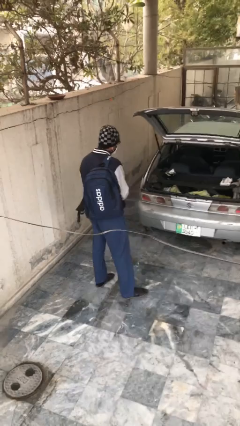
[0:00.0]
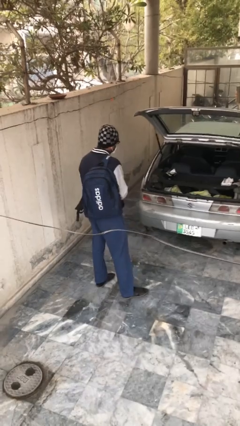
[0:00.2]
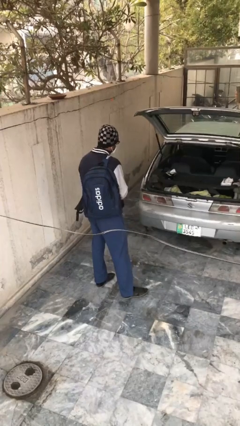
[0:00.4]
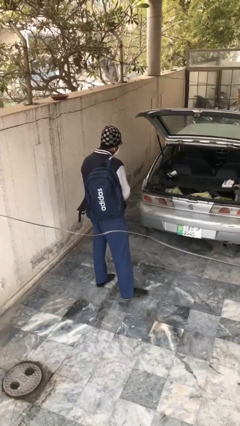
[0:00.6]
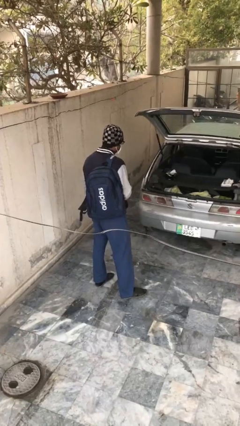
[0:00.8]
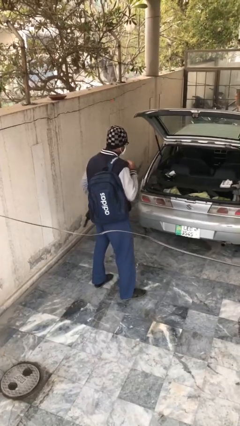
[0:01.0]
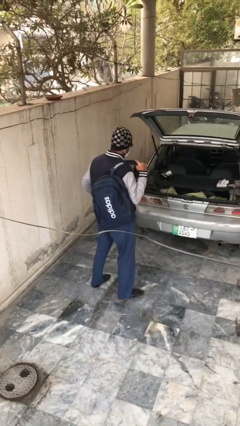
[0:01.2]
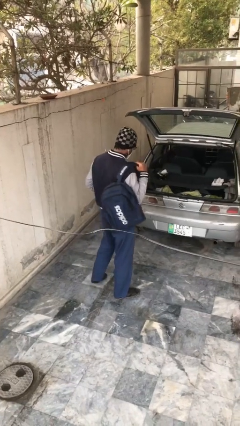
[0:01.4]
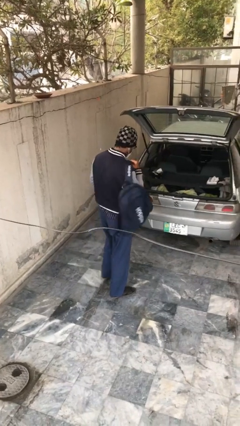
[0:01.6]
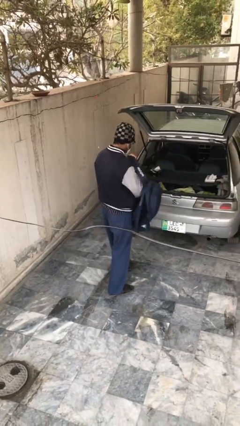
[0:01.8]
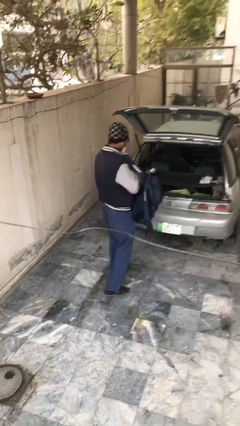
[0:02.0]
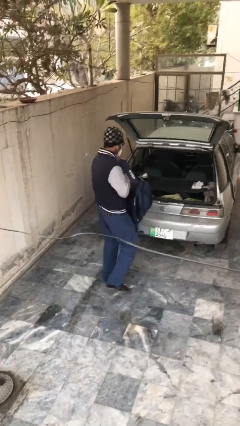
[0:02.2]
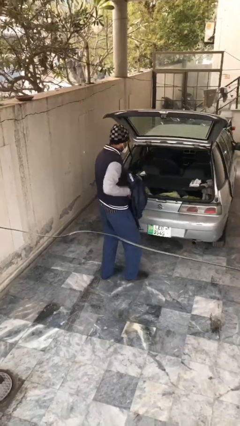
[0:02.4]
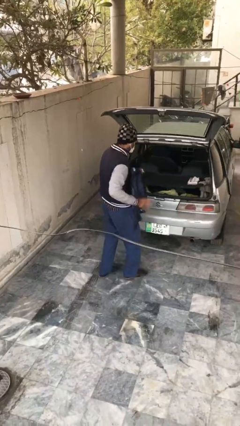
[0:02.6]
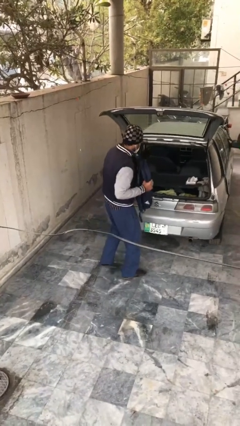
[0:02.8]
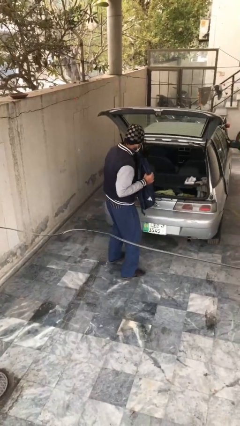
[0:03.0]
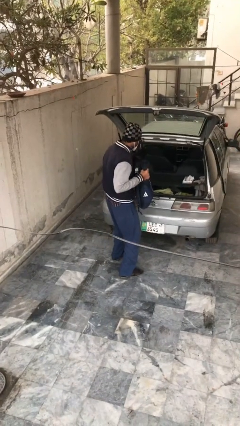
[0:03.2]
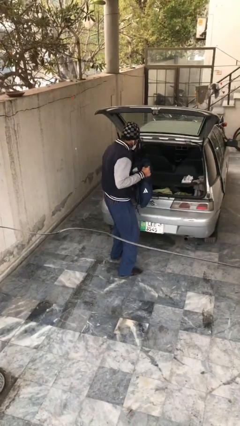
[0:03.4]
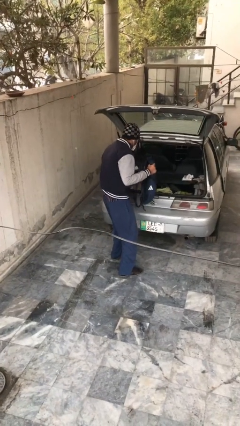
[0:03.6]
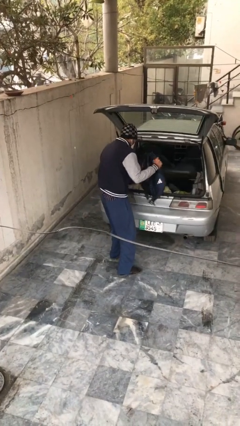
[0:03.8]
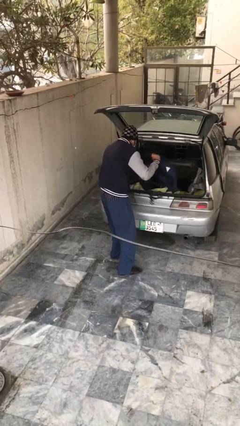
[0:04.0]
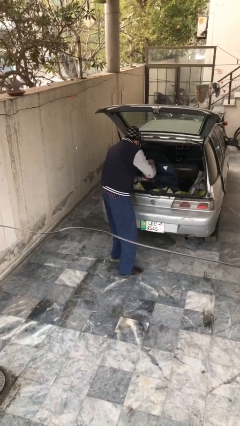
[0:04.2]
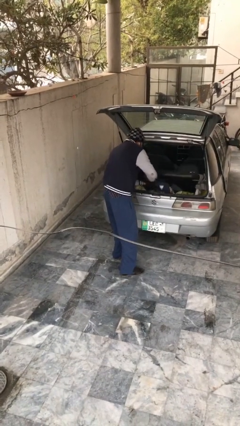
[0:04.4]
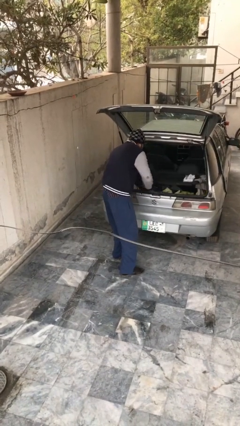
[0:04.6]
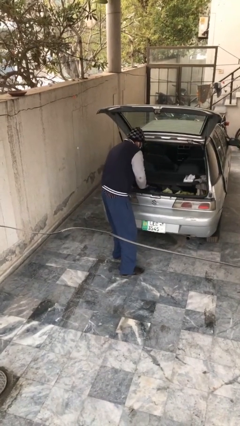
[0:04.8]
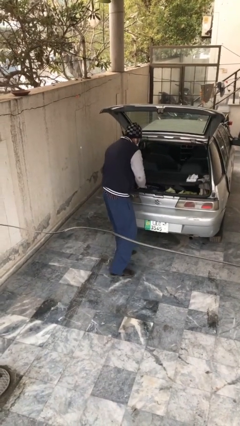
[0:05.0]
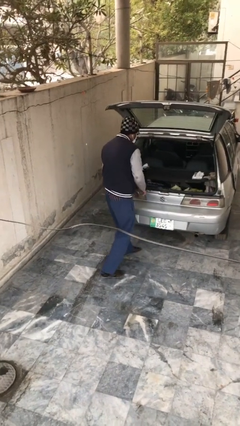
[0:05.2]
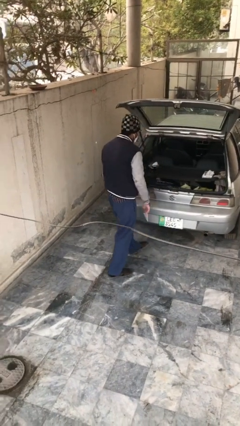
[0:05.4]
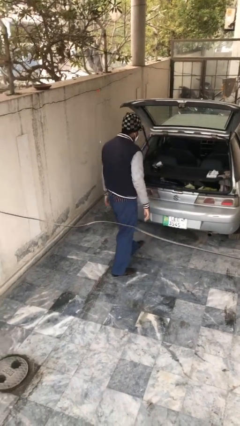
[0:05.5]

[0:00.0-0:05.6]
person loads car

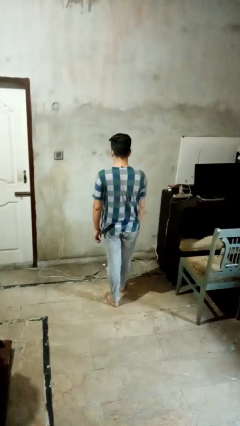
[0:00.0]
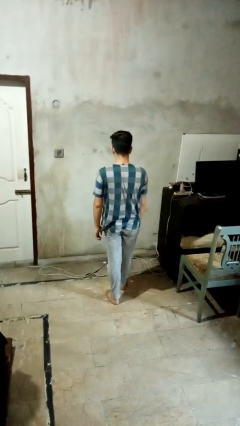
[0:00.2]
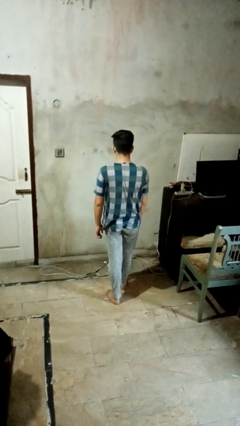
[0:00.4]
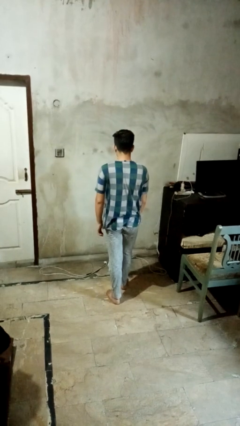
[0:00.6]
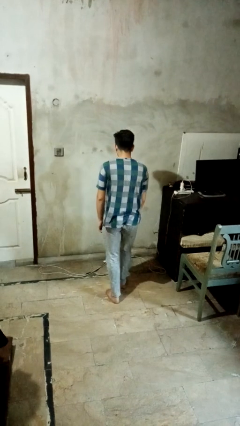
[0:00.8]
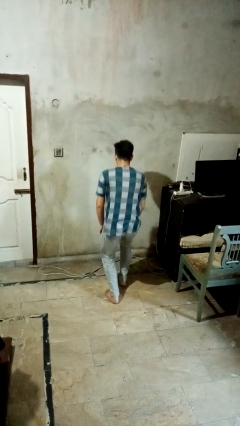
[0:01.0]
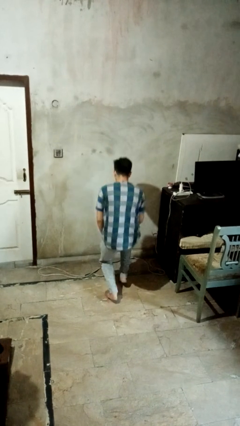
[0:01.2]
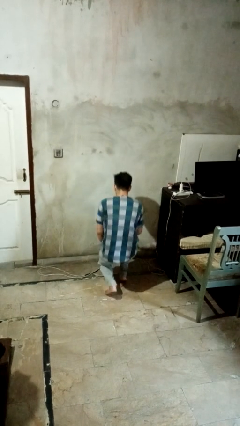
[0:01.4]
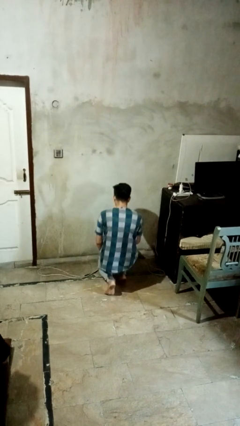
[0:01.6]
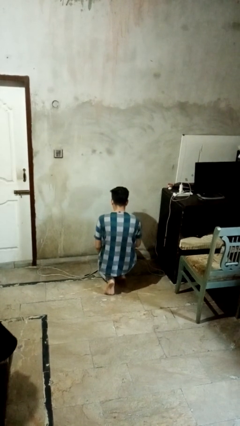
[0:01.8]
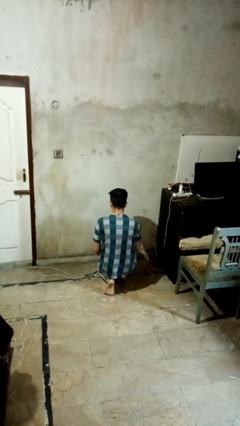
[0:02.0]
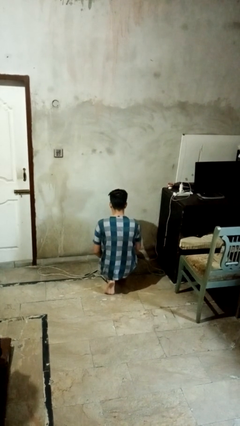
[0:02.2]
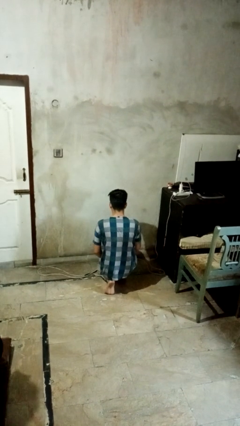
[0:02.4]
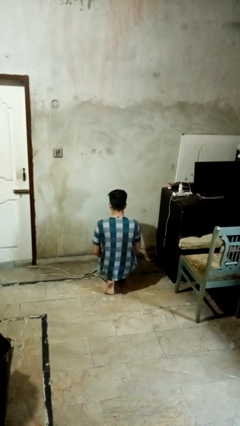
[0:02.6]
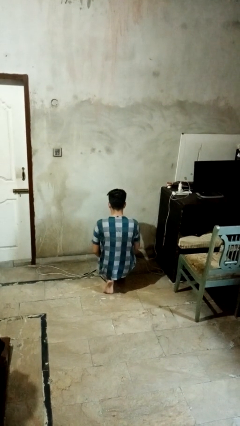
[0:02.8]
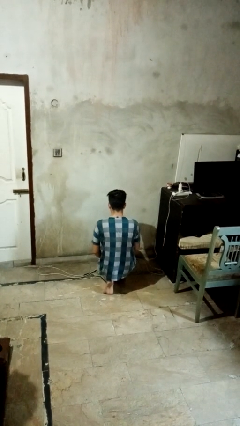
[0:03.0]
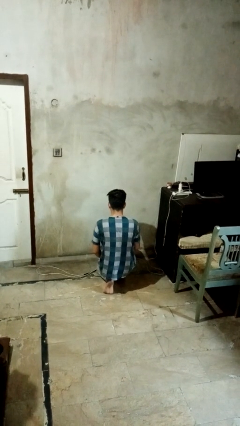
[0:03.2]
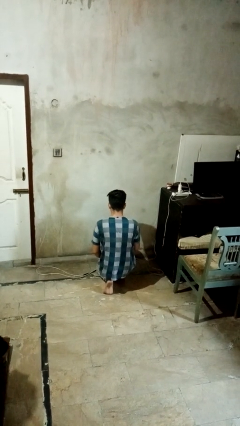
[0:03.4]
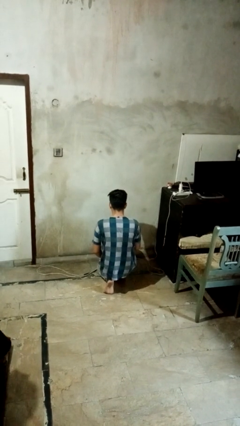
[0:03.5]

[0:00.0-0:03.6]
person kneels

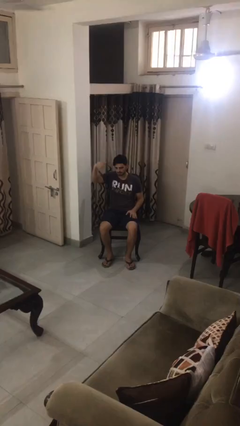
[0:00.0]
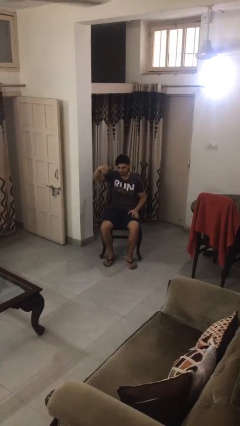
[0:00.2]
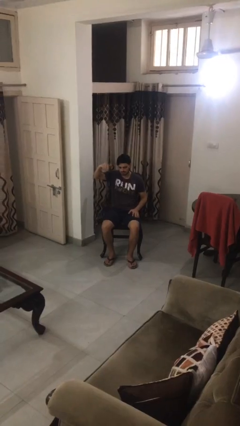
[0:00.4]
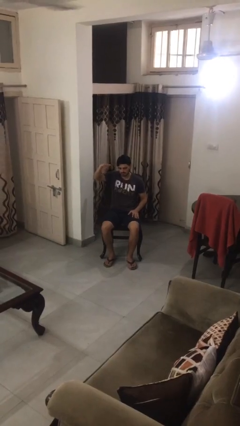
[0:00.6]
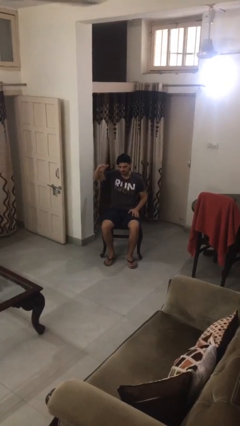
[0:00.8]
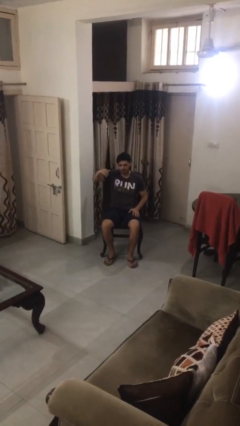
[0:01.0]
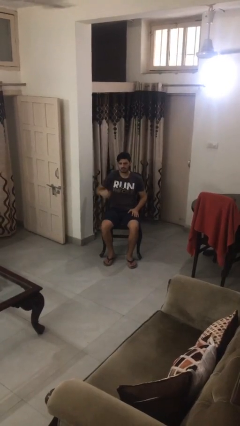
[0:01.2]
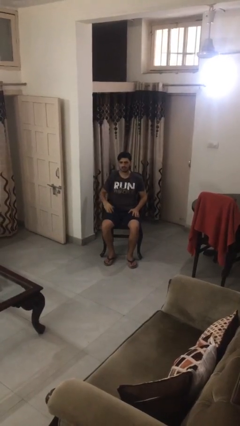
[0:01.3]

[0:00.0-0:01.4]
person gestures come here

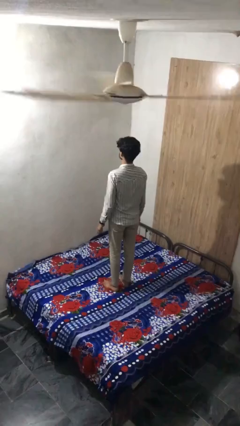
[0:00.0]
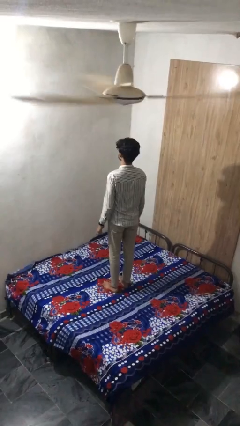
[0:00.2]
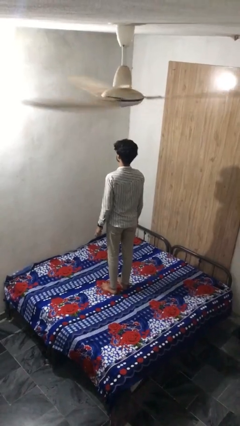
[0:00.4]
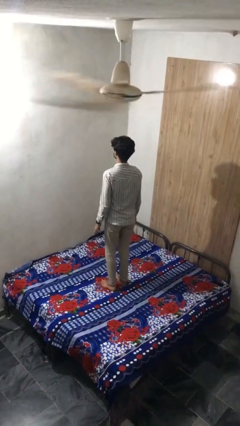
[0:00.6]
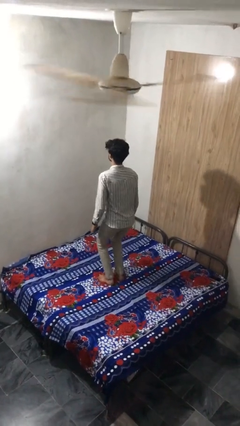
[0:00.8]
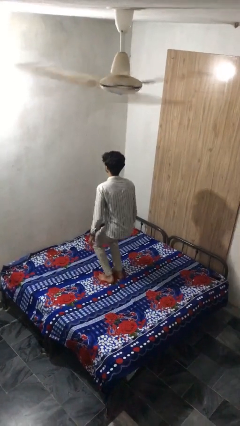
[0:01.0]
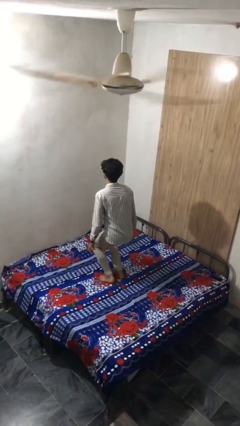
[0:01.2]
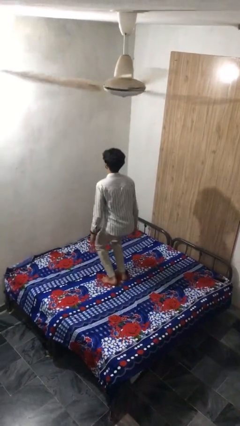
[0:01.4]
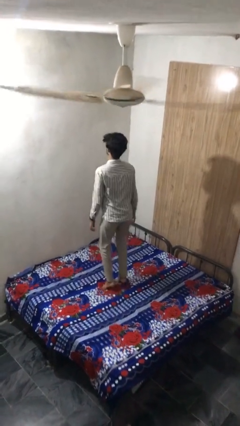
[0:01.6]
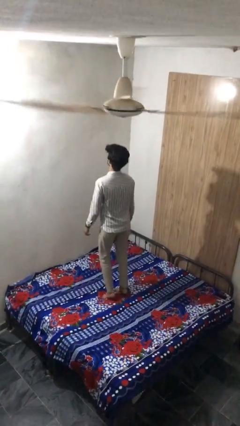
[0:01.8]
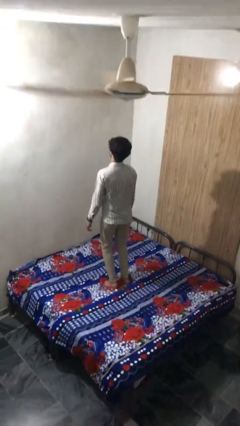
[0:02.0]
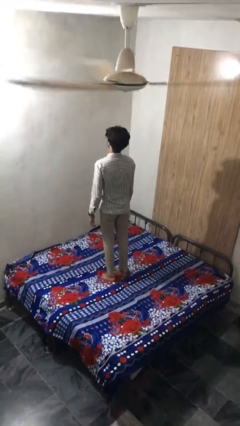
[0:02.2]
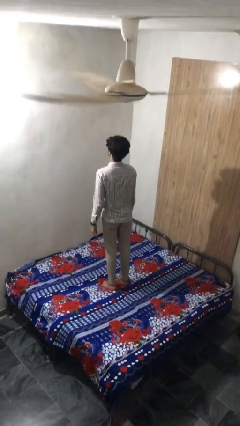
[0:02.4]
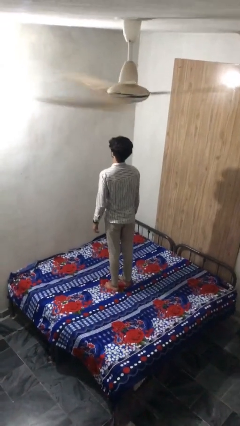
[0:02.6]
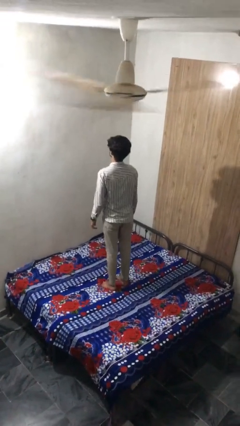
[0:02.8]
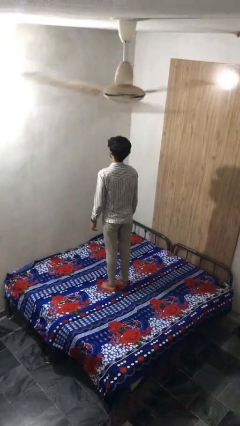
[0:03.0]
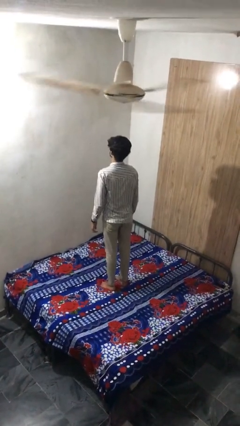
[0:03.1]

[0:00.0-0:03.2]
person jumps on bed

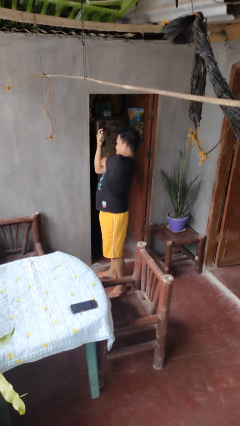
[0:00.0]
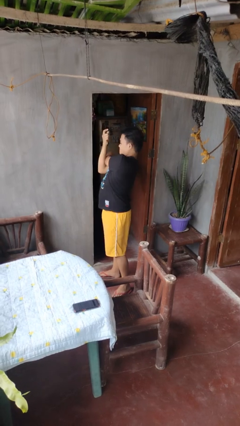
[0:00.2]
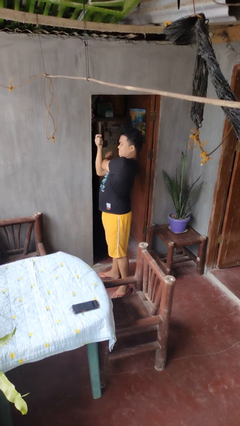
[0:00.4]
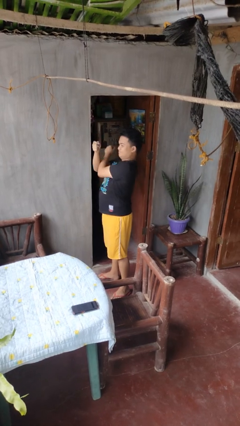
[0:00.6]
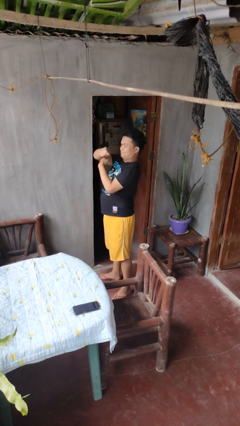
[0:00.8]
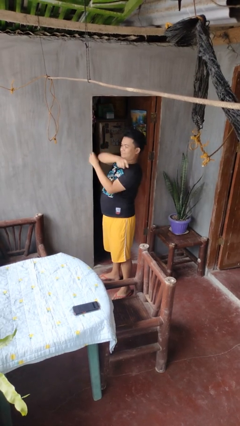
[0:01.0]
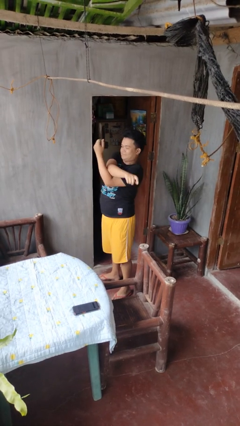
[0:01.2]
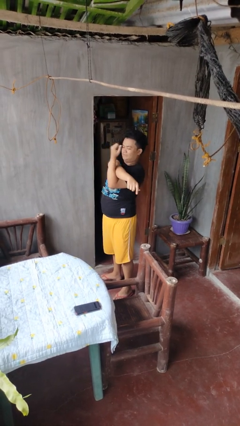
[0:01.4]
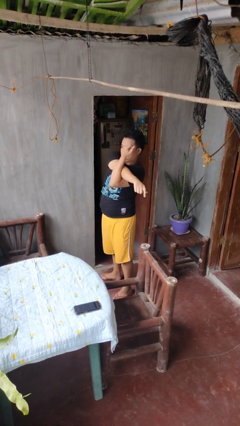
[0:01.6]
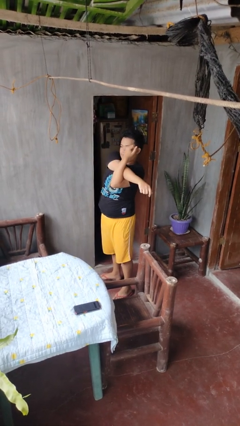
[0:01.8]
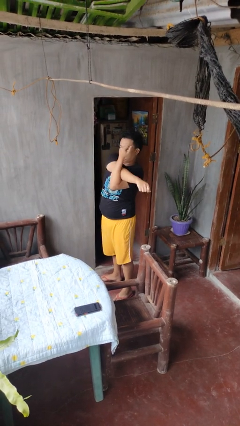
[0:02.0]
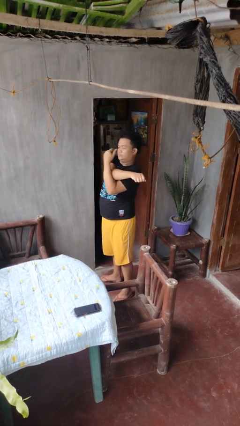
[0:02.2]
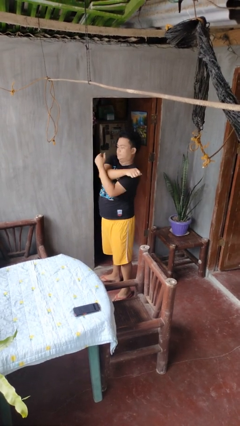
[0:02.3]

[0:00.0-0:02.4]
person stretches arms to side

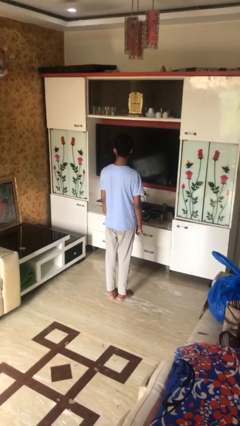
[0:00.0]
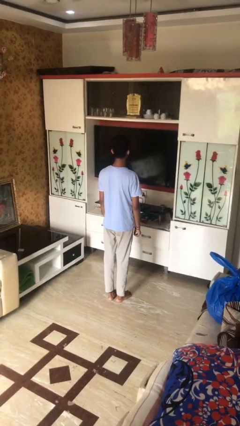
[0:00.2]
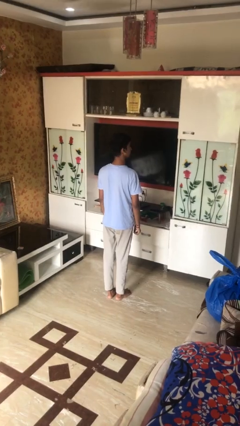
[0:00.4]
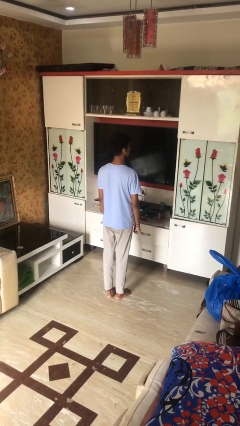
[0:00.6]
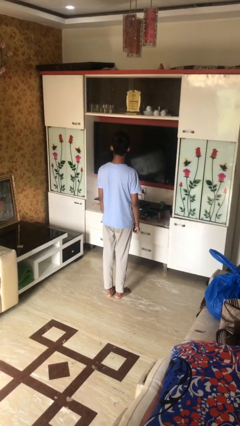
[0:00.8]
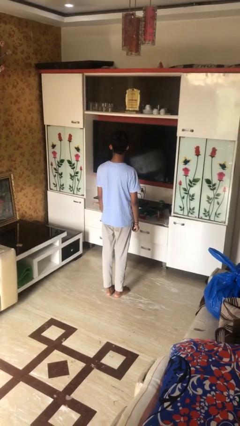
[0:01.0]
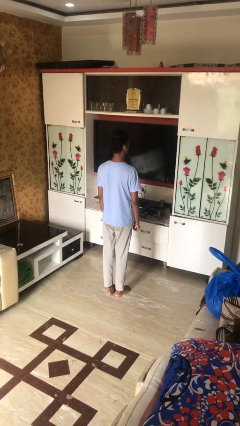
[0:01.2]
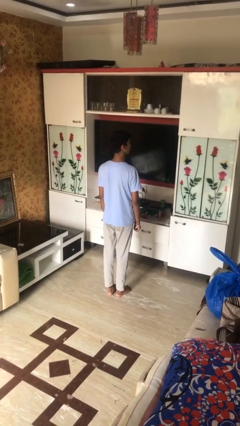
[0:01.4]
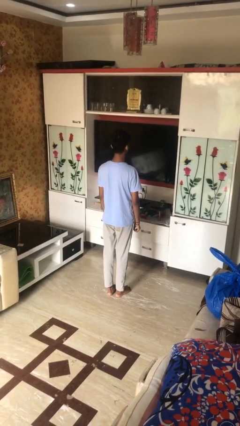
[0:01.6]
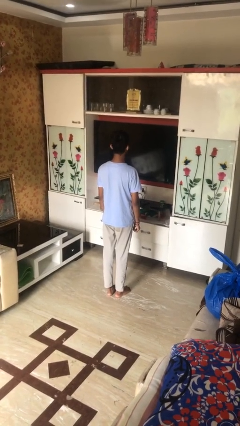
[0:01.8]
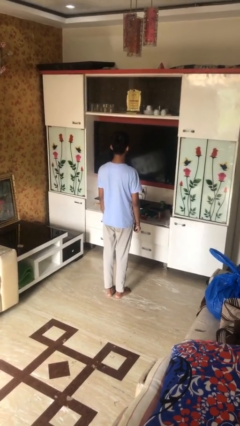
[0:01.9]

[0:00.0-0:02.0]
person shakes head
